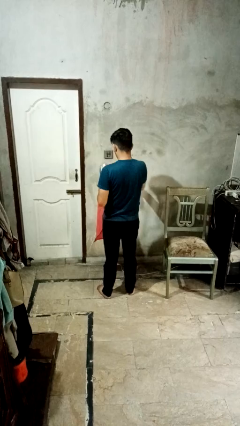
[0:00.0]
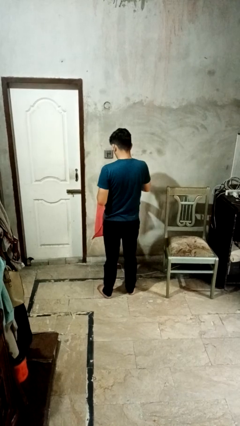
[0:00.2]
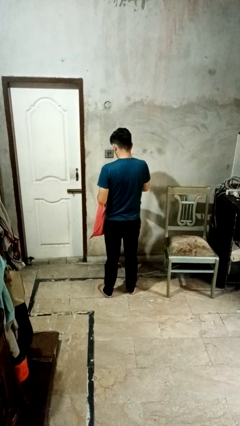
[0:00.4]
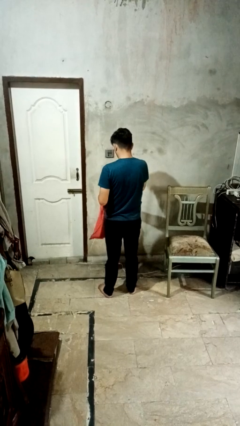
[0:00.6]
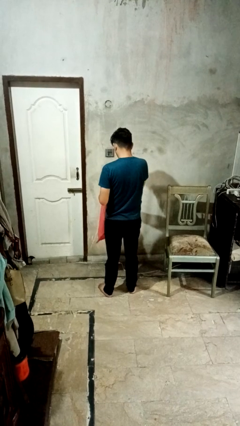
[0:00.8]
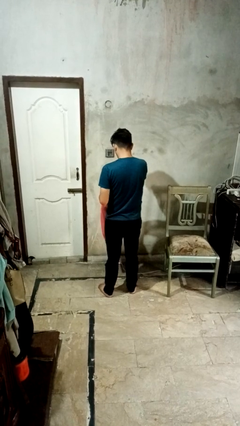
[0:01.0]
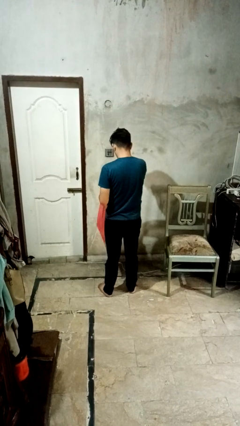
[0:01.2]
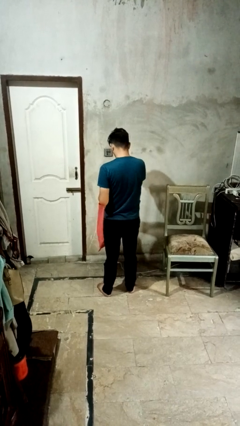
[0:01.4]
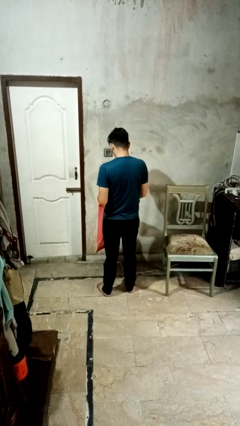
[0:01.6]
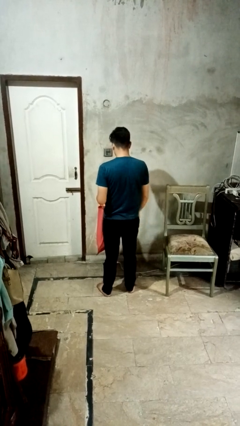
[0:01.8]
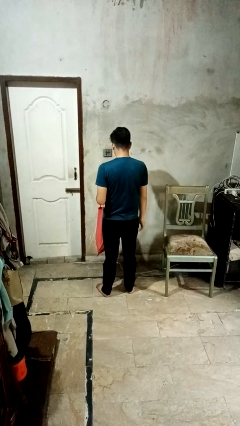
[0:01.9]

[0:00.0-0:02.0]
person puts object into bag

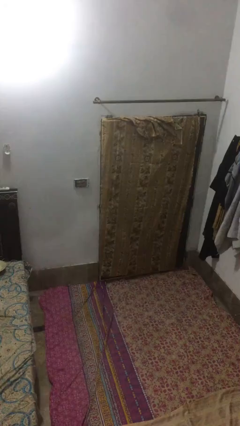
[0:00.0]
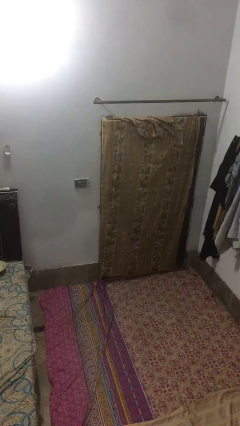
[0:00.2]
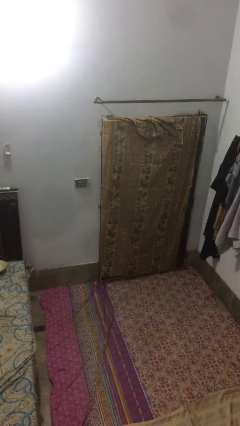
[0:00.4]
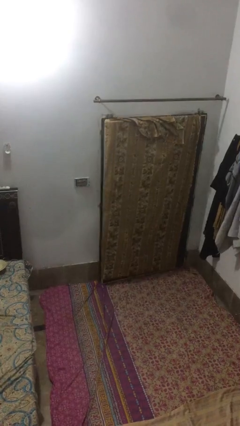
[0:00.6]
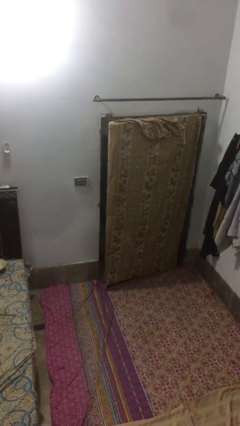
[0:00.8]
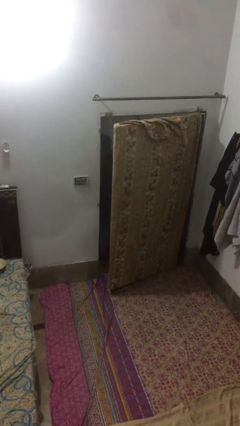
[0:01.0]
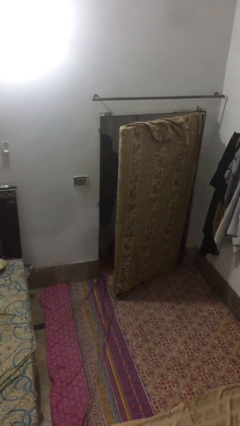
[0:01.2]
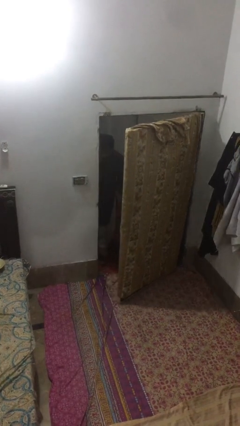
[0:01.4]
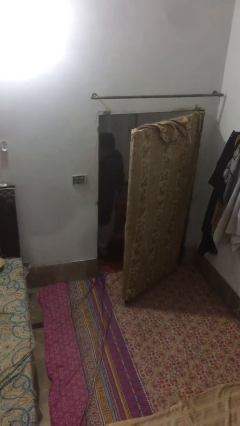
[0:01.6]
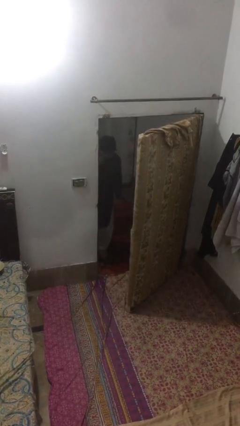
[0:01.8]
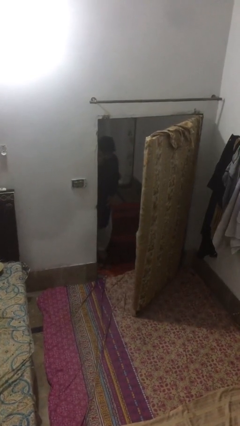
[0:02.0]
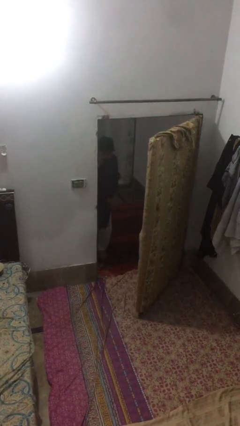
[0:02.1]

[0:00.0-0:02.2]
person opens facility door

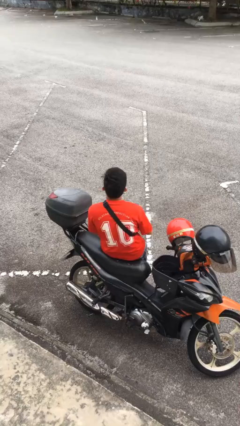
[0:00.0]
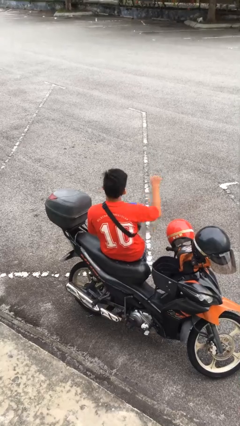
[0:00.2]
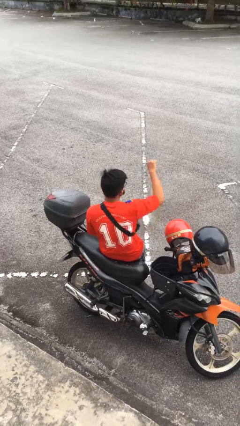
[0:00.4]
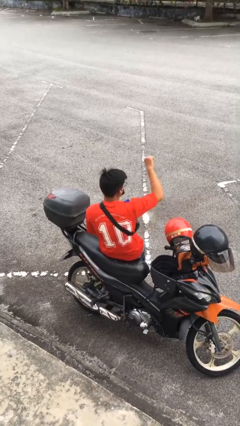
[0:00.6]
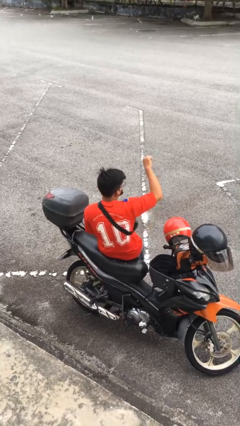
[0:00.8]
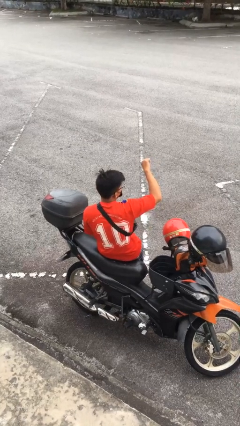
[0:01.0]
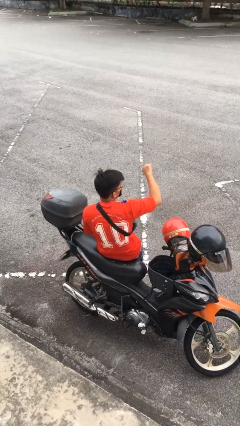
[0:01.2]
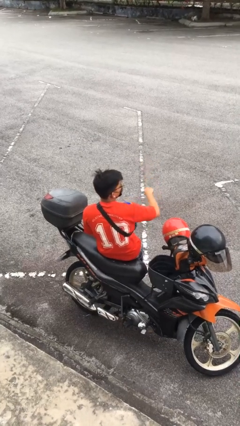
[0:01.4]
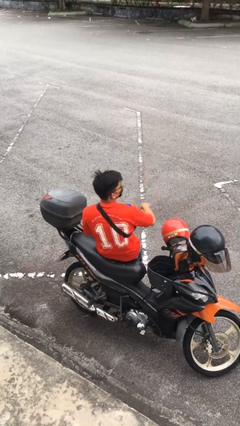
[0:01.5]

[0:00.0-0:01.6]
person gestures thumbs down

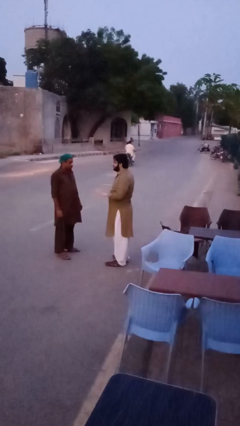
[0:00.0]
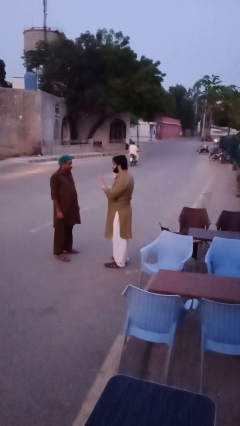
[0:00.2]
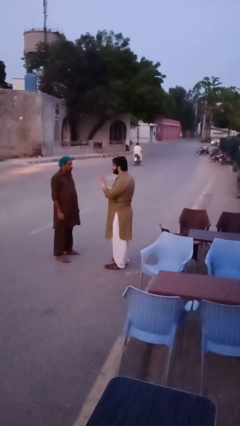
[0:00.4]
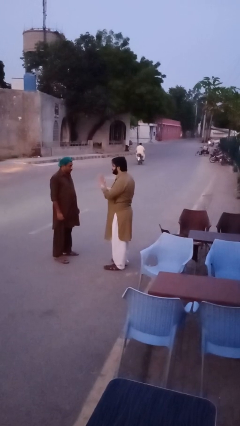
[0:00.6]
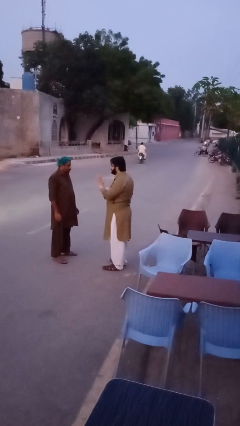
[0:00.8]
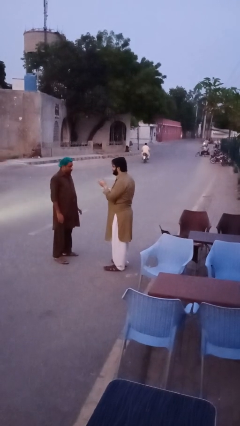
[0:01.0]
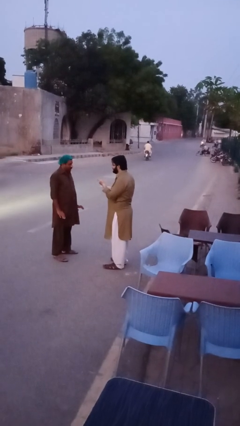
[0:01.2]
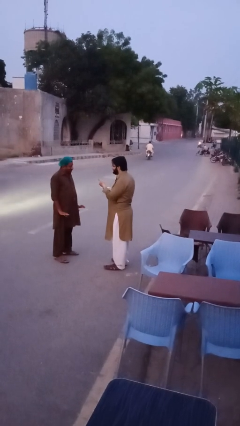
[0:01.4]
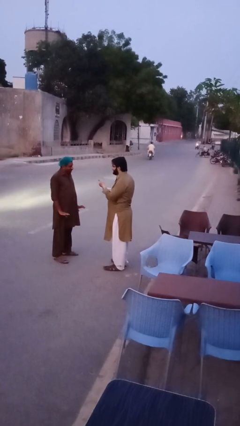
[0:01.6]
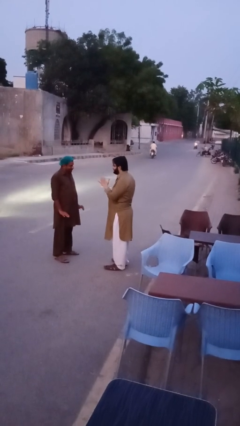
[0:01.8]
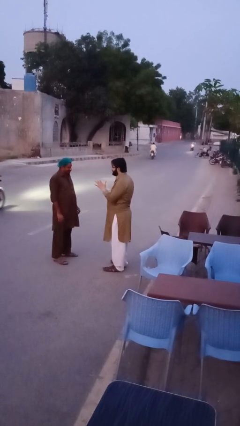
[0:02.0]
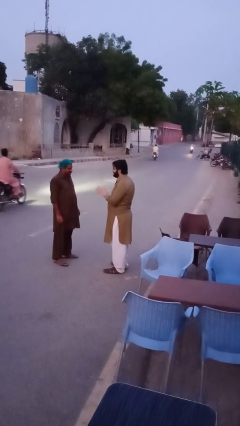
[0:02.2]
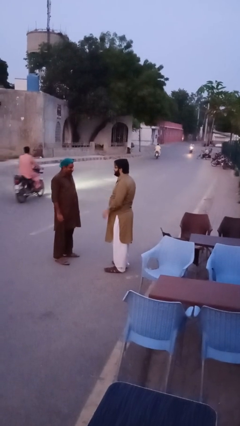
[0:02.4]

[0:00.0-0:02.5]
person talks to person

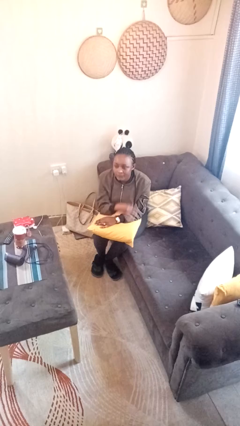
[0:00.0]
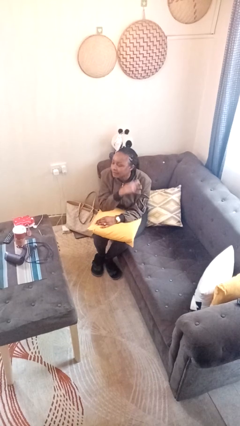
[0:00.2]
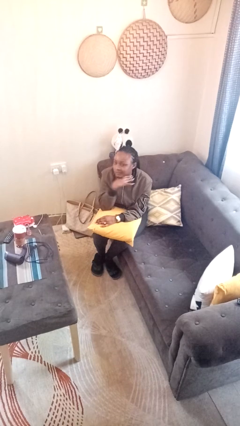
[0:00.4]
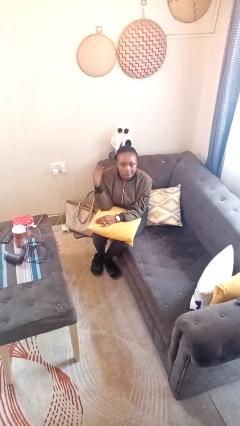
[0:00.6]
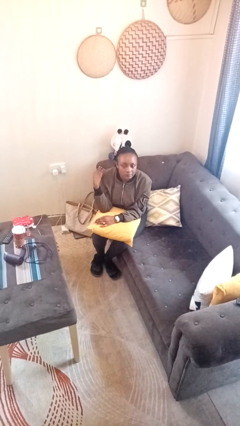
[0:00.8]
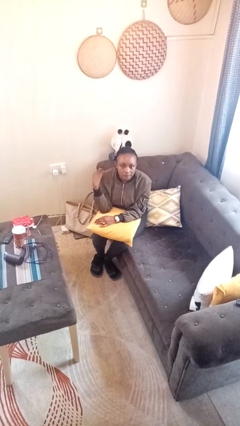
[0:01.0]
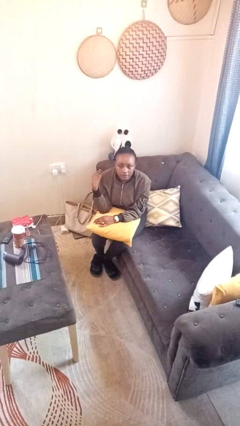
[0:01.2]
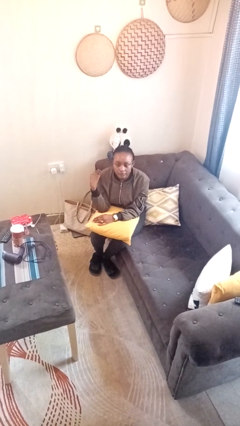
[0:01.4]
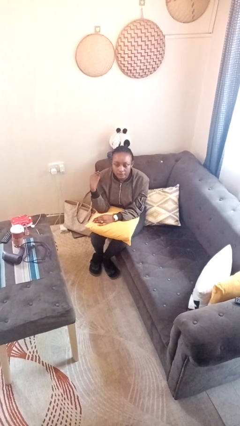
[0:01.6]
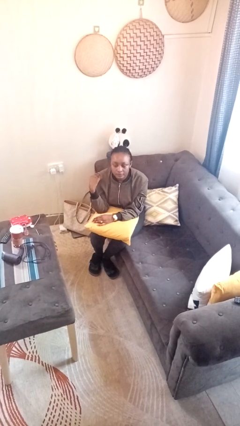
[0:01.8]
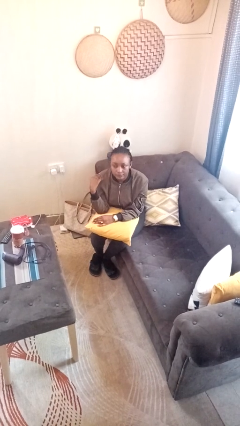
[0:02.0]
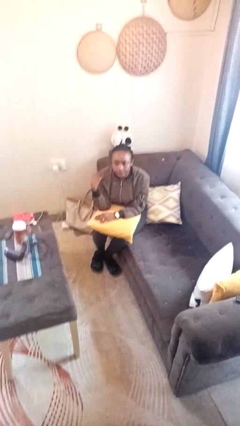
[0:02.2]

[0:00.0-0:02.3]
person gestures cut

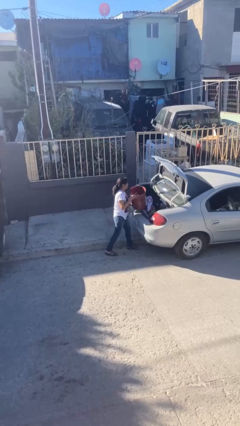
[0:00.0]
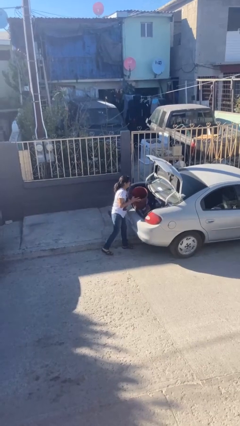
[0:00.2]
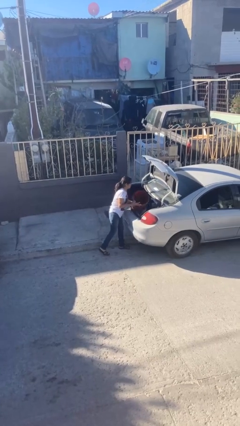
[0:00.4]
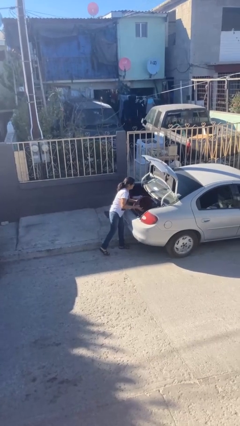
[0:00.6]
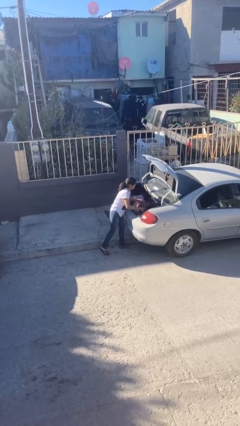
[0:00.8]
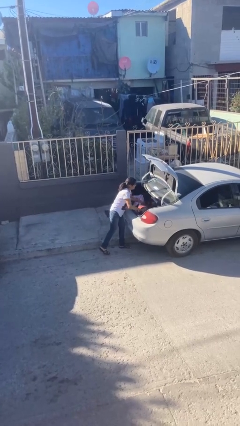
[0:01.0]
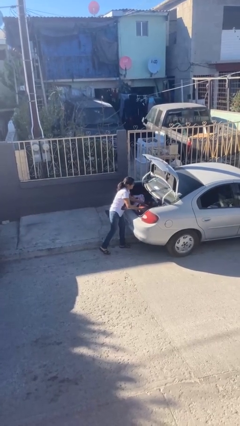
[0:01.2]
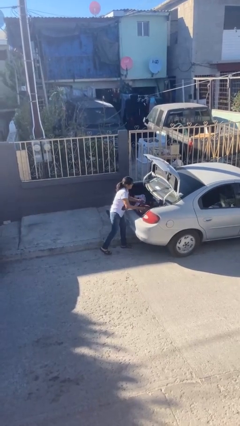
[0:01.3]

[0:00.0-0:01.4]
person loads car

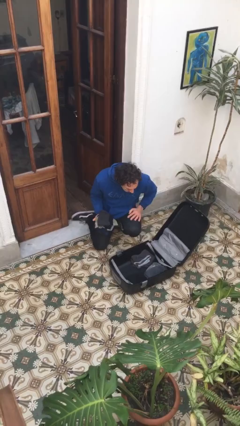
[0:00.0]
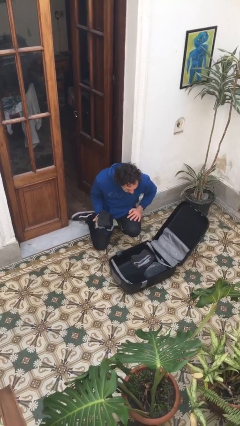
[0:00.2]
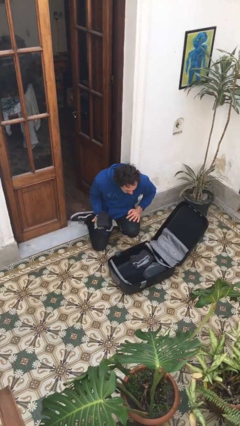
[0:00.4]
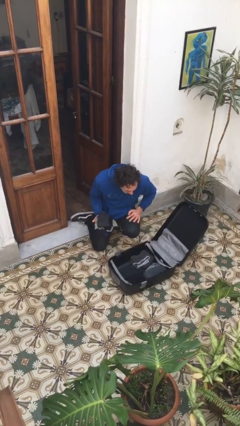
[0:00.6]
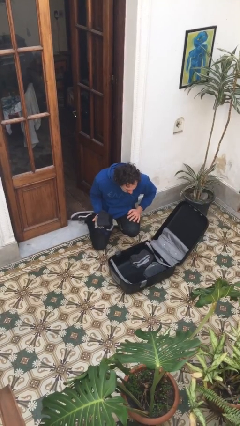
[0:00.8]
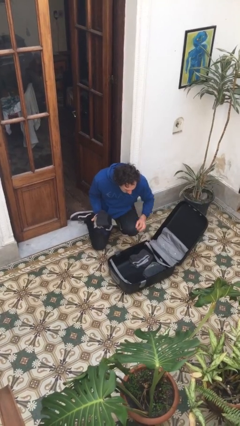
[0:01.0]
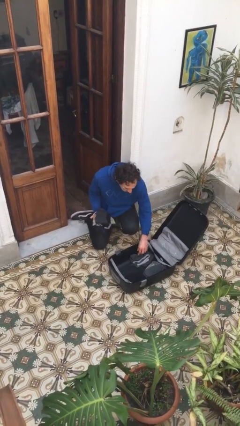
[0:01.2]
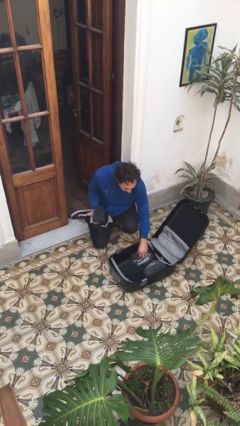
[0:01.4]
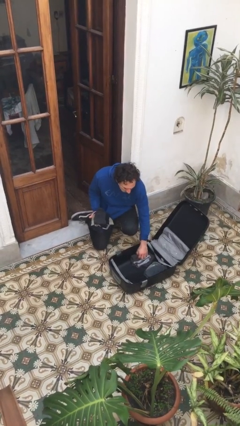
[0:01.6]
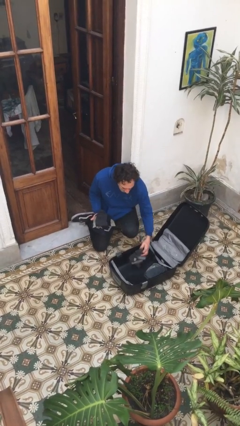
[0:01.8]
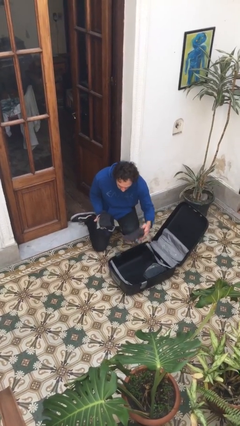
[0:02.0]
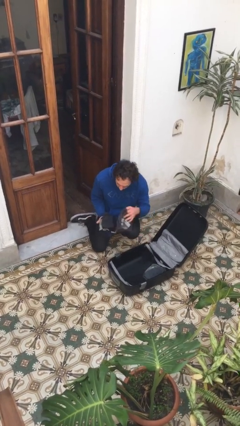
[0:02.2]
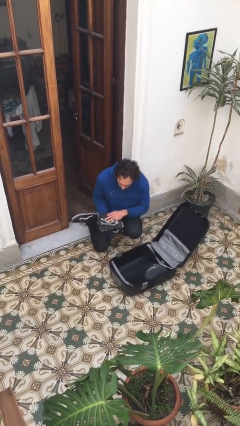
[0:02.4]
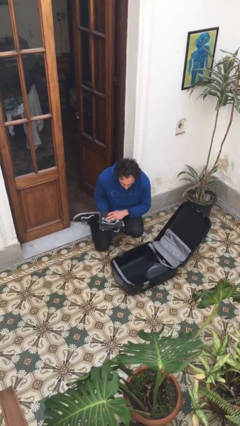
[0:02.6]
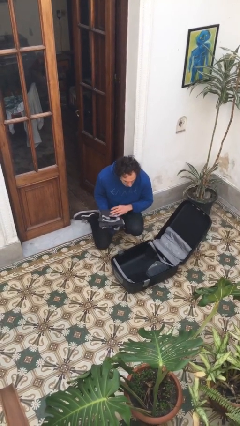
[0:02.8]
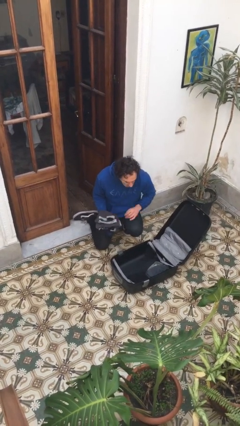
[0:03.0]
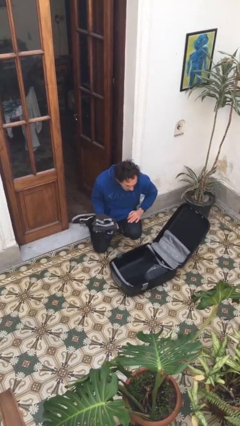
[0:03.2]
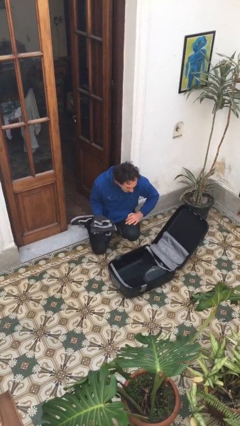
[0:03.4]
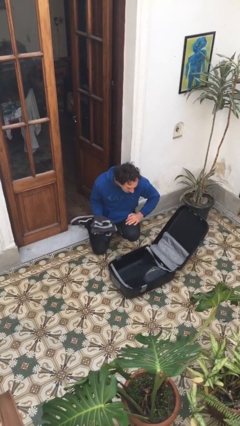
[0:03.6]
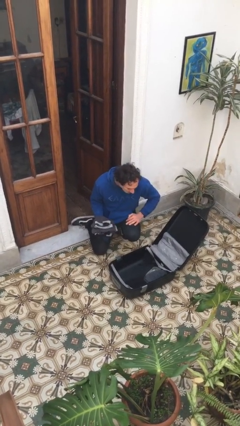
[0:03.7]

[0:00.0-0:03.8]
person unloads clothes from suitcase

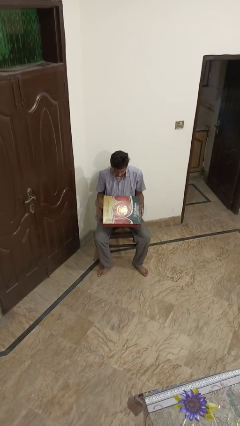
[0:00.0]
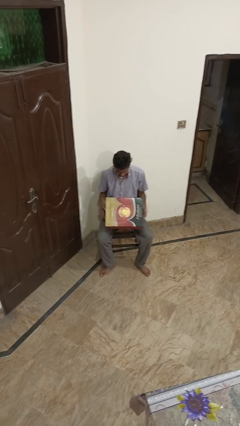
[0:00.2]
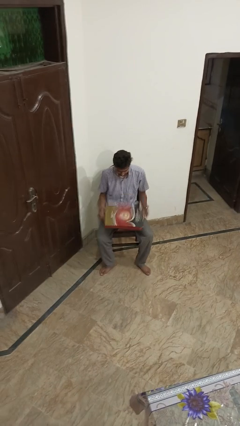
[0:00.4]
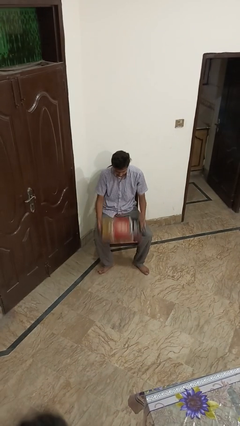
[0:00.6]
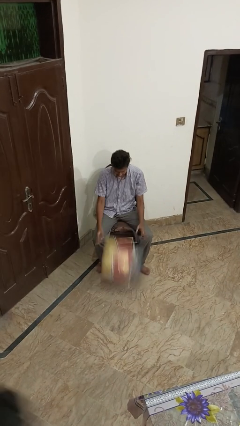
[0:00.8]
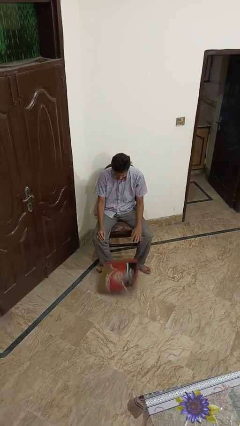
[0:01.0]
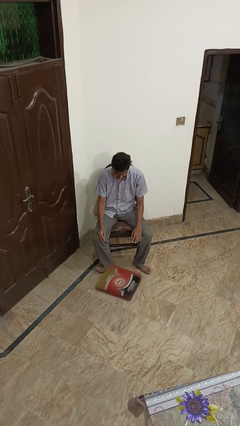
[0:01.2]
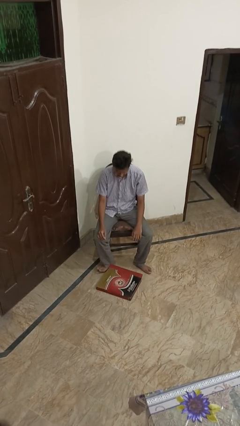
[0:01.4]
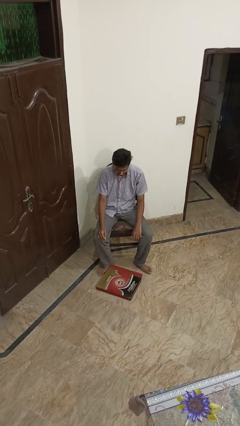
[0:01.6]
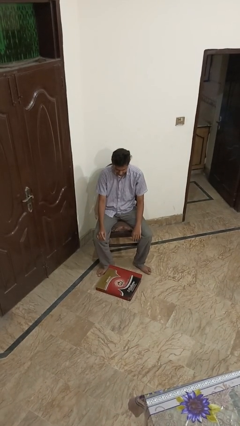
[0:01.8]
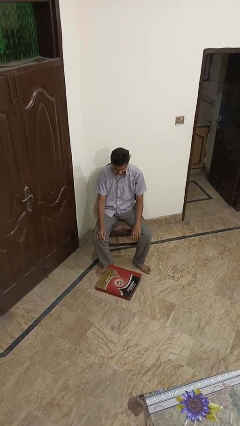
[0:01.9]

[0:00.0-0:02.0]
person drops object
